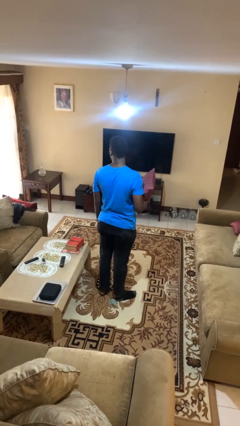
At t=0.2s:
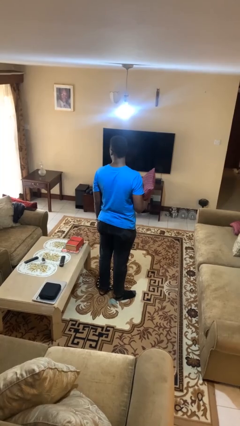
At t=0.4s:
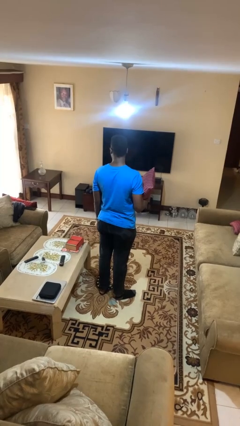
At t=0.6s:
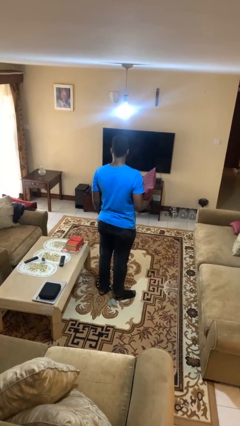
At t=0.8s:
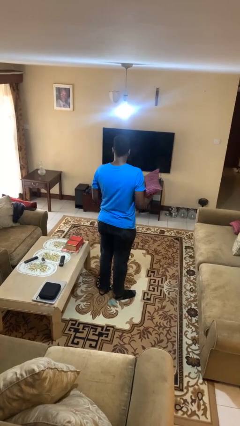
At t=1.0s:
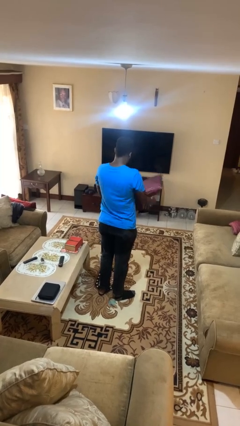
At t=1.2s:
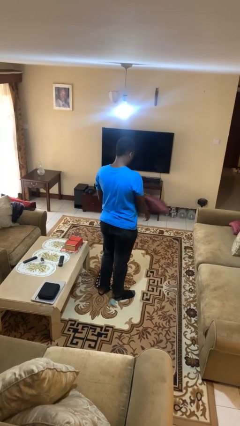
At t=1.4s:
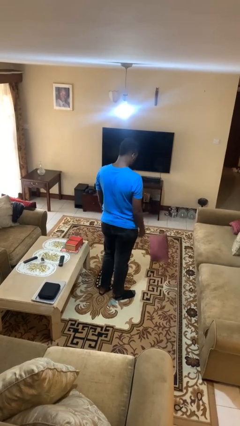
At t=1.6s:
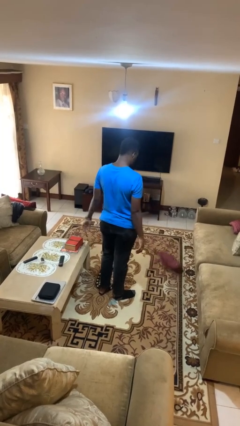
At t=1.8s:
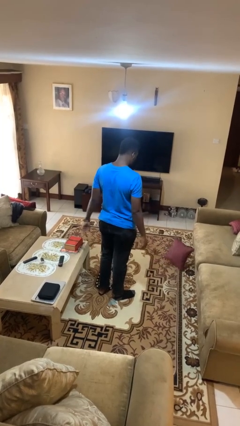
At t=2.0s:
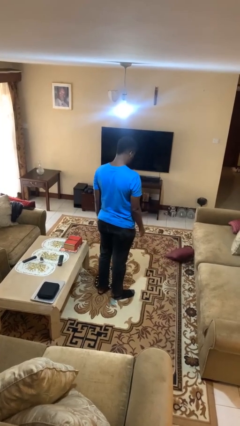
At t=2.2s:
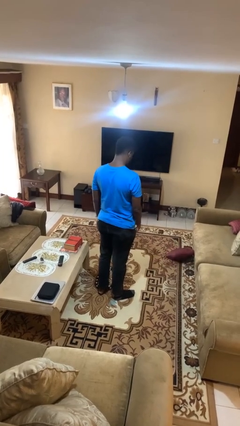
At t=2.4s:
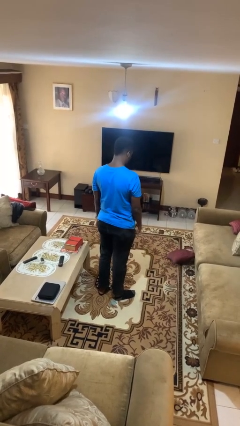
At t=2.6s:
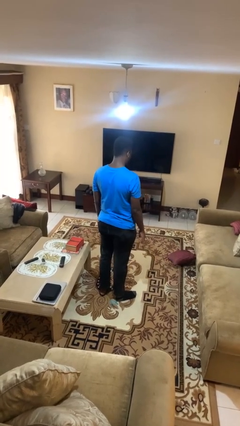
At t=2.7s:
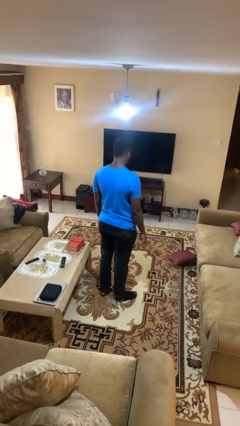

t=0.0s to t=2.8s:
person drops object

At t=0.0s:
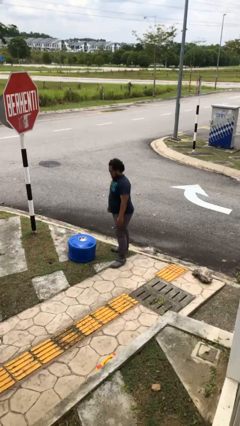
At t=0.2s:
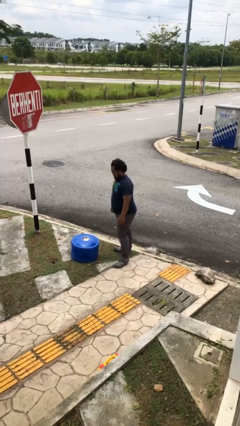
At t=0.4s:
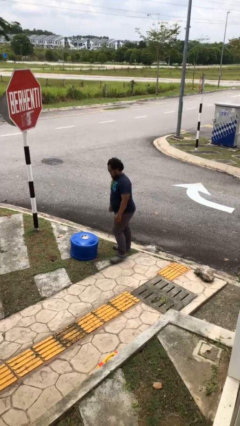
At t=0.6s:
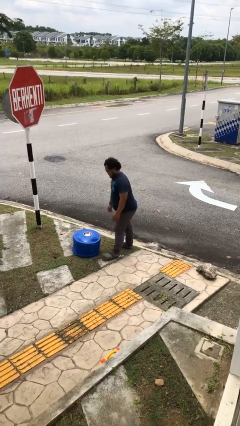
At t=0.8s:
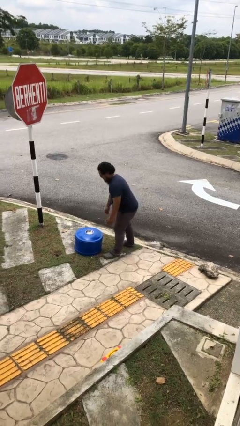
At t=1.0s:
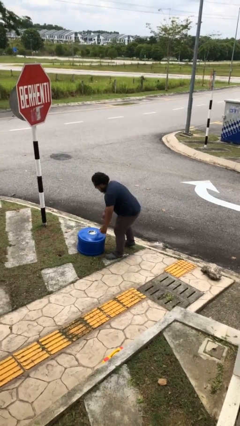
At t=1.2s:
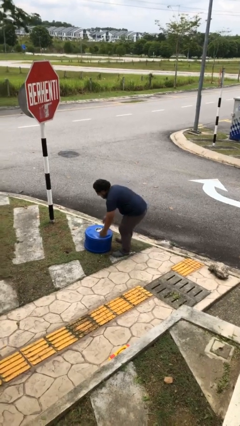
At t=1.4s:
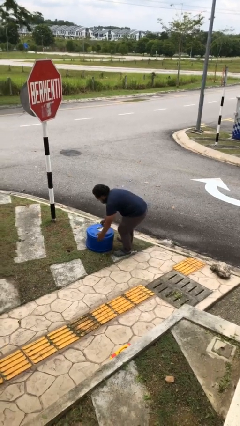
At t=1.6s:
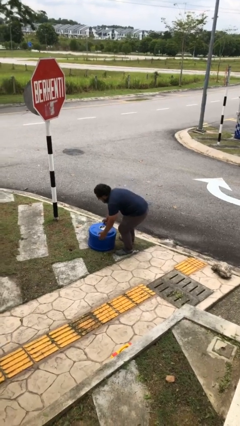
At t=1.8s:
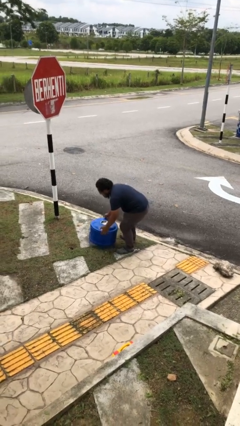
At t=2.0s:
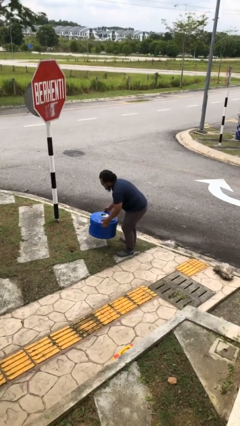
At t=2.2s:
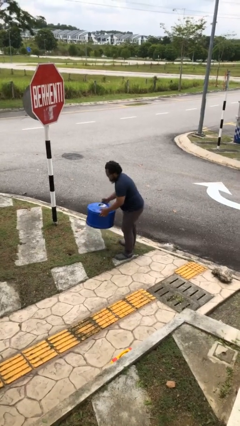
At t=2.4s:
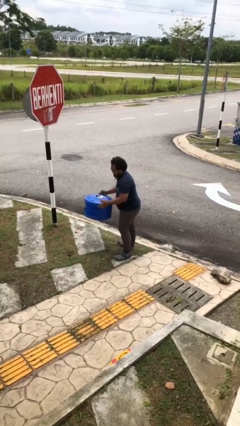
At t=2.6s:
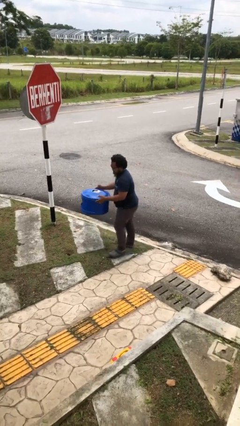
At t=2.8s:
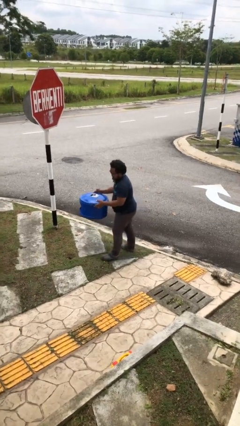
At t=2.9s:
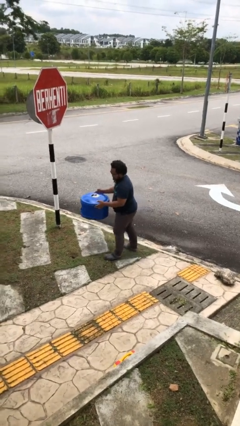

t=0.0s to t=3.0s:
person picks up object from floor

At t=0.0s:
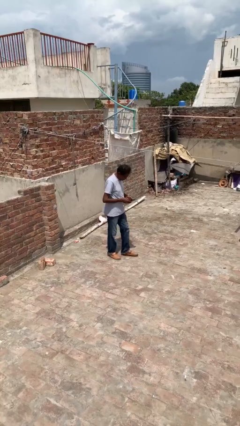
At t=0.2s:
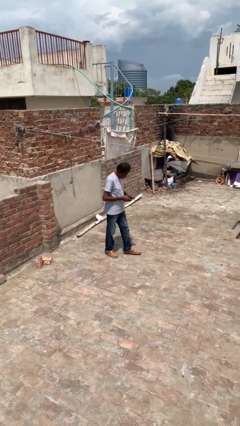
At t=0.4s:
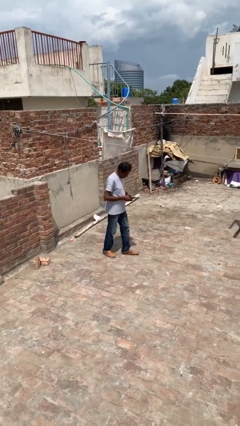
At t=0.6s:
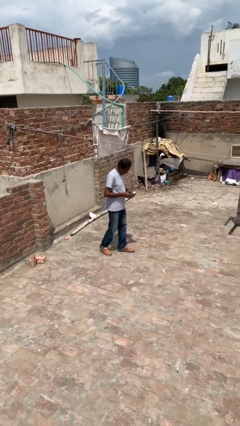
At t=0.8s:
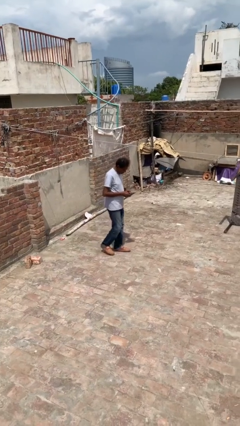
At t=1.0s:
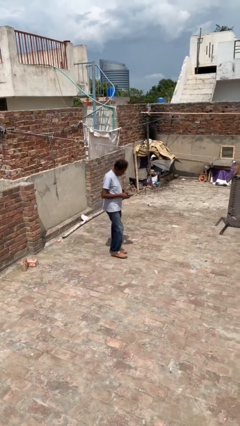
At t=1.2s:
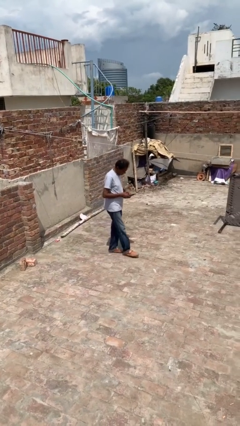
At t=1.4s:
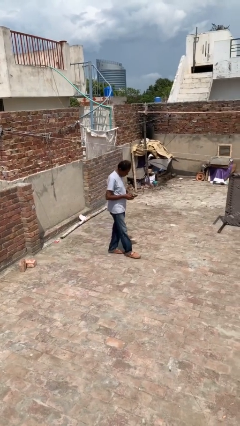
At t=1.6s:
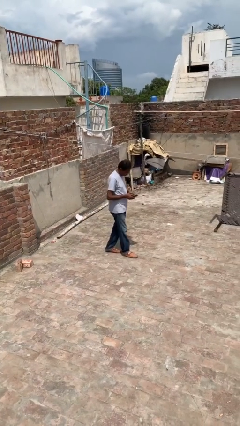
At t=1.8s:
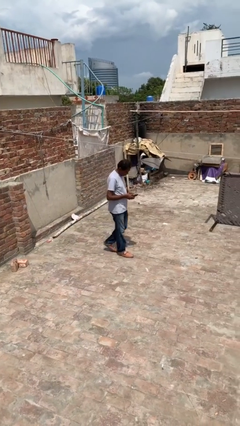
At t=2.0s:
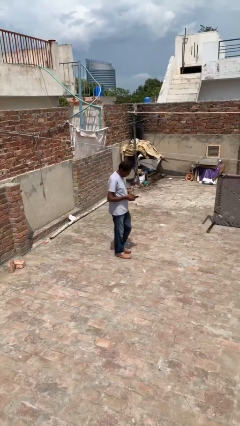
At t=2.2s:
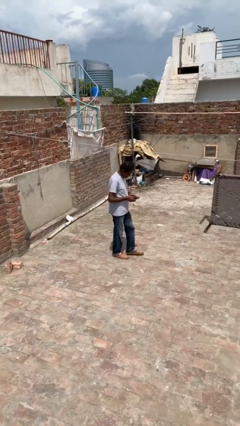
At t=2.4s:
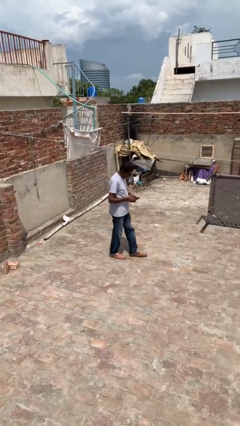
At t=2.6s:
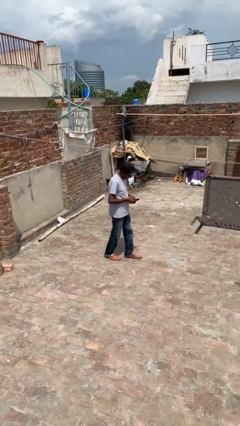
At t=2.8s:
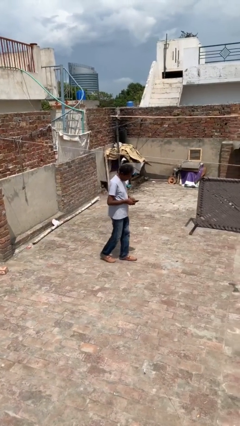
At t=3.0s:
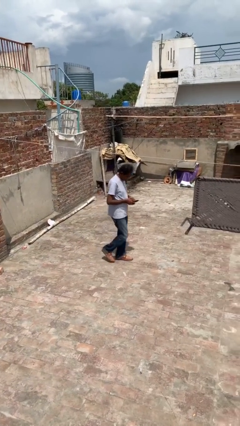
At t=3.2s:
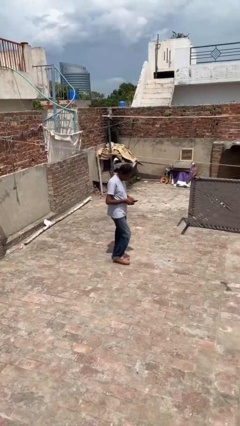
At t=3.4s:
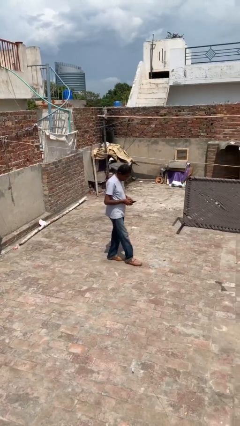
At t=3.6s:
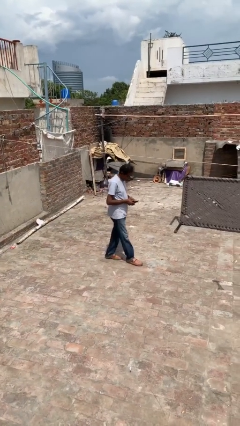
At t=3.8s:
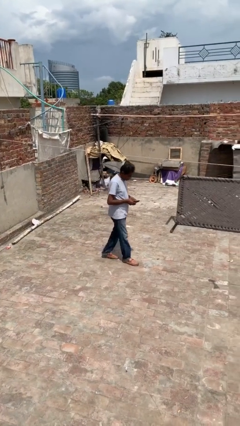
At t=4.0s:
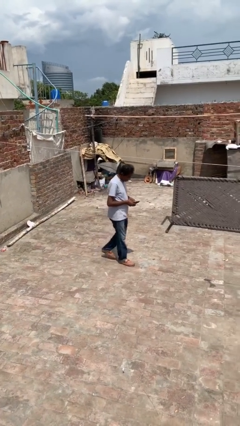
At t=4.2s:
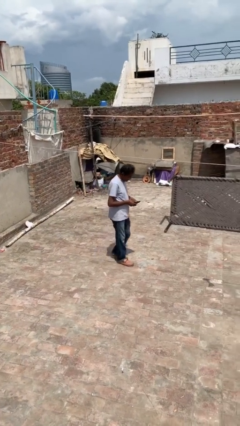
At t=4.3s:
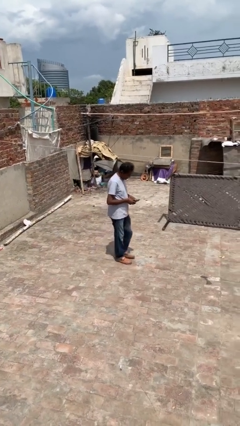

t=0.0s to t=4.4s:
person texts on phone

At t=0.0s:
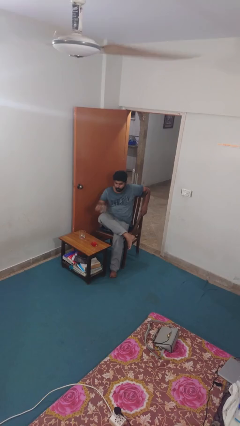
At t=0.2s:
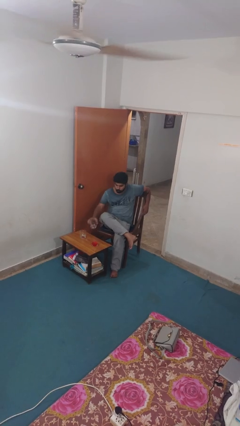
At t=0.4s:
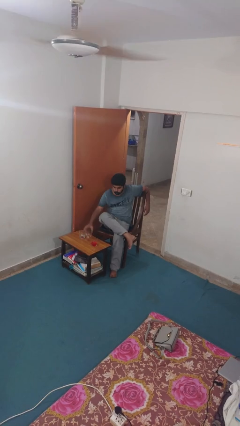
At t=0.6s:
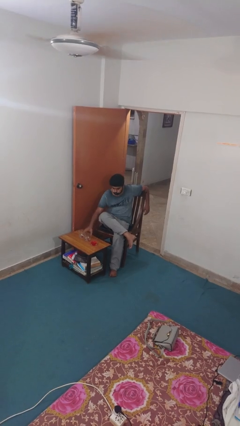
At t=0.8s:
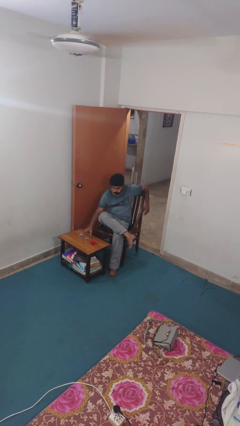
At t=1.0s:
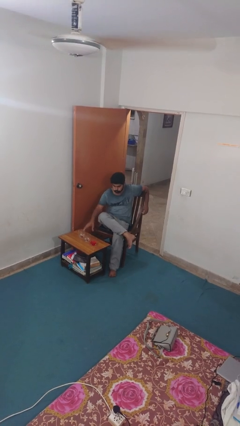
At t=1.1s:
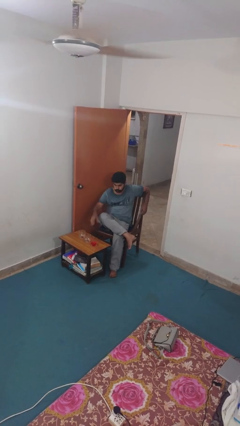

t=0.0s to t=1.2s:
person puts down object on table

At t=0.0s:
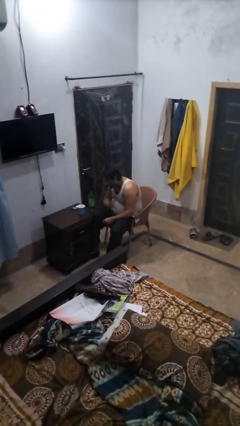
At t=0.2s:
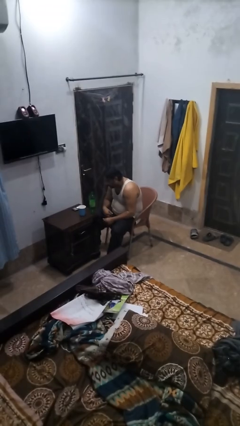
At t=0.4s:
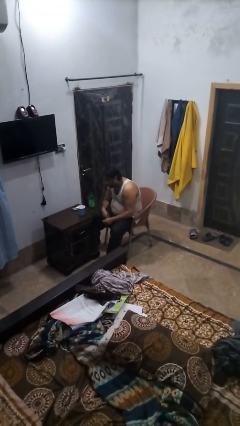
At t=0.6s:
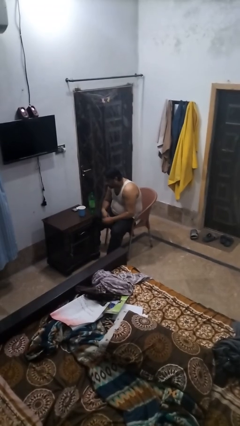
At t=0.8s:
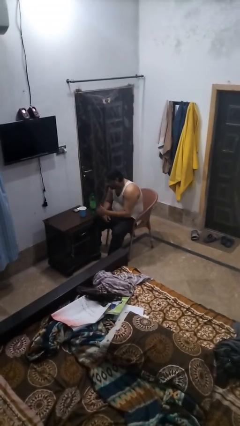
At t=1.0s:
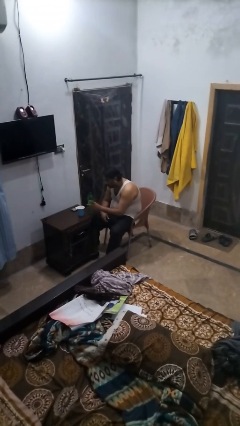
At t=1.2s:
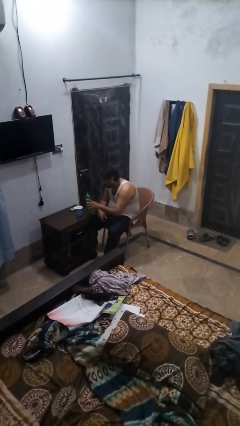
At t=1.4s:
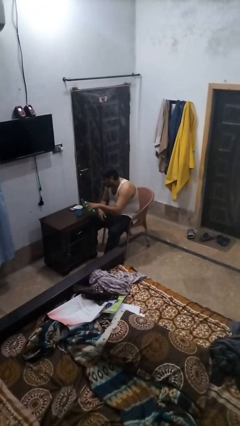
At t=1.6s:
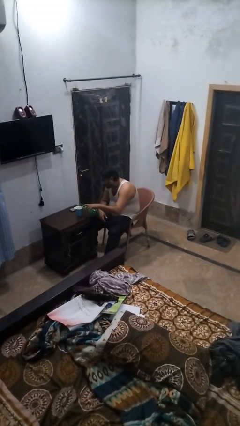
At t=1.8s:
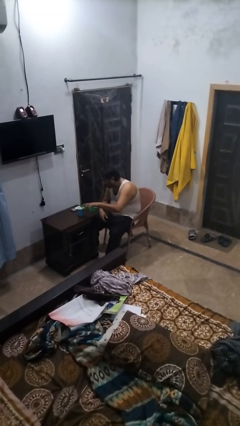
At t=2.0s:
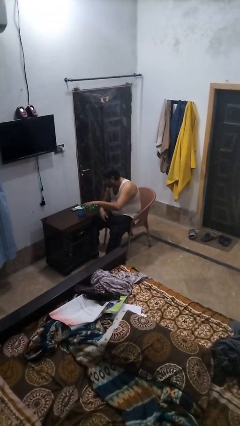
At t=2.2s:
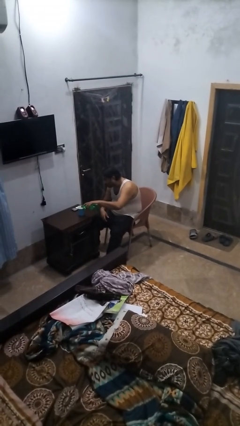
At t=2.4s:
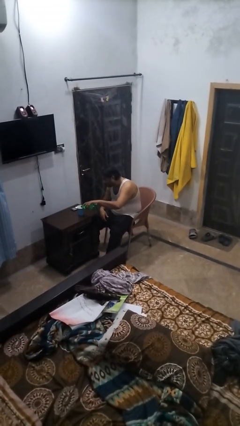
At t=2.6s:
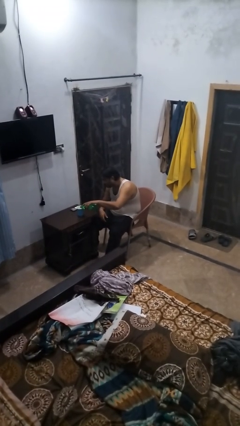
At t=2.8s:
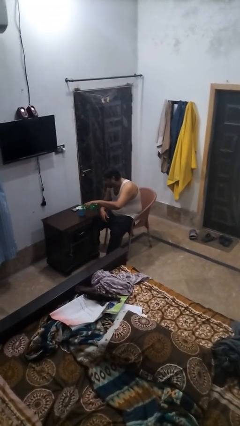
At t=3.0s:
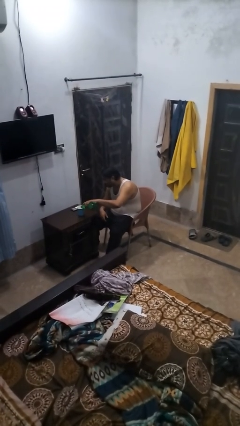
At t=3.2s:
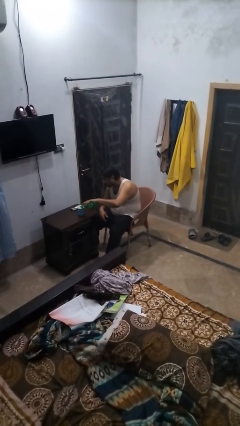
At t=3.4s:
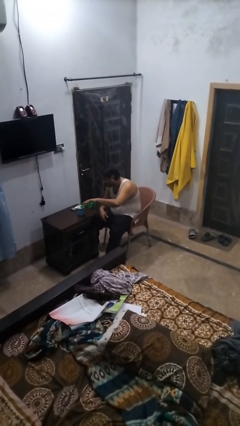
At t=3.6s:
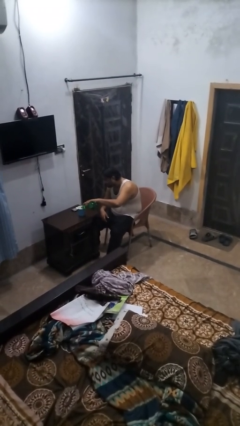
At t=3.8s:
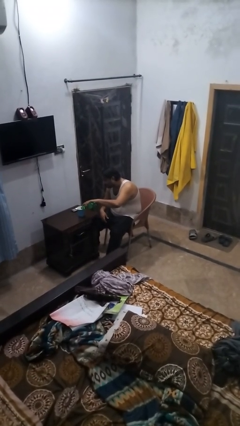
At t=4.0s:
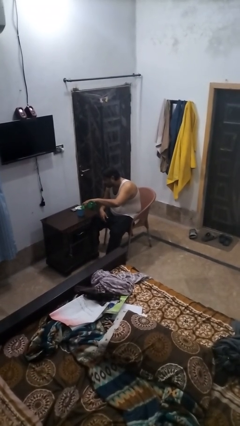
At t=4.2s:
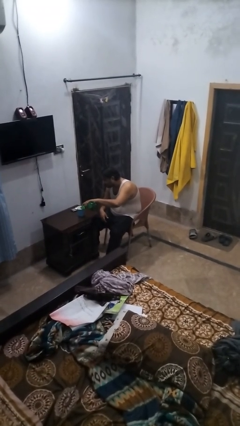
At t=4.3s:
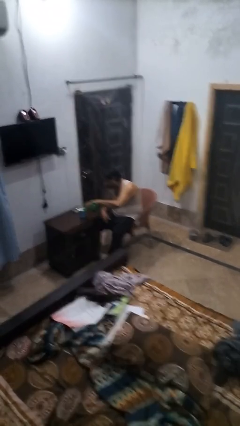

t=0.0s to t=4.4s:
person pours liquid into cup

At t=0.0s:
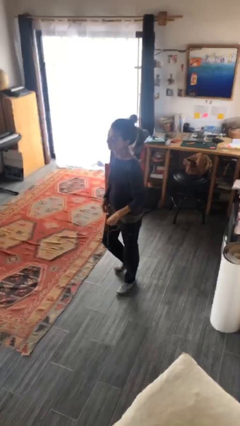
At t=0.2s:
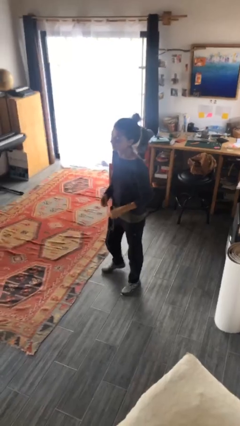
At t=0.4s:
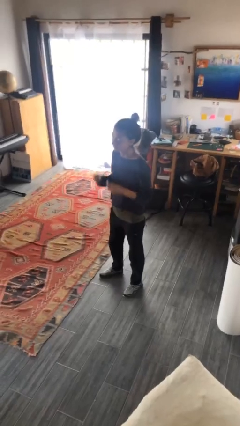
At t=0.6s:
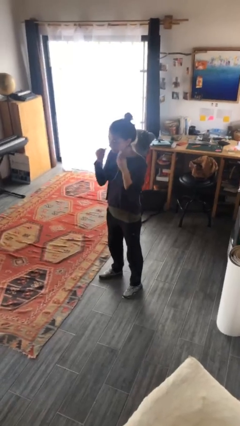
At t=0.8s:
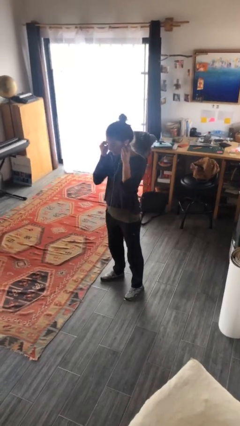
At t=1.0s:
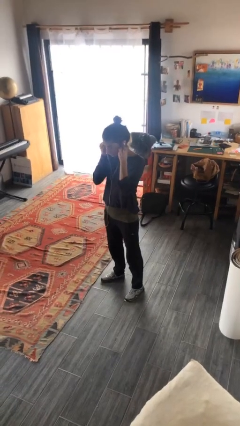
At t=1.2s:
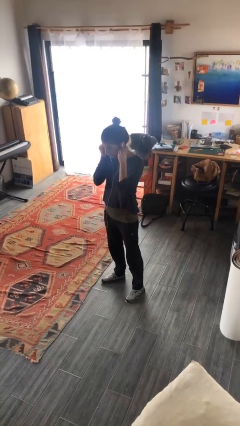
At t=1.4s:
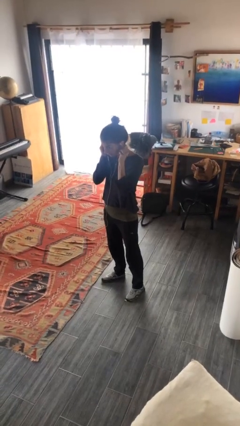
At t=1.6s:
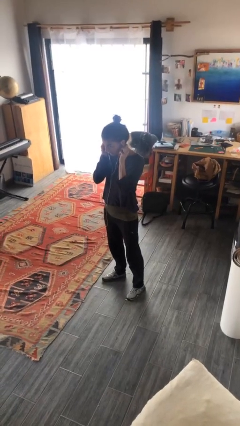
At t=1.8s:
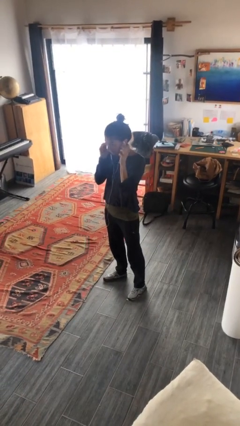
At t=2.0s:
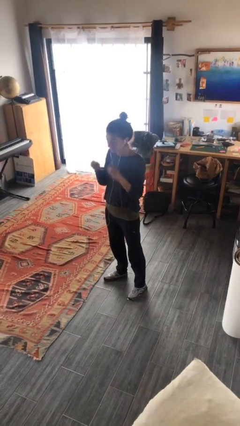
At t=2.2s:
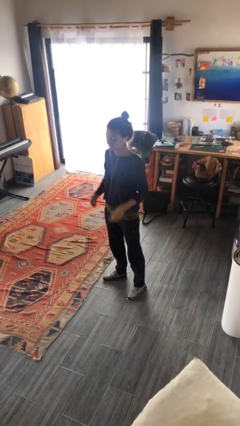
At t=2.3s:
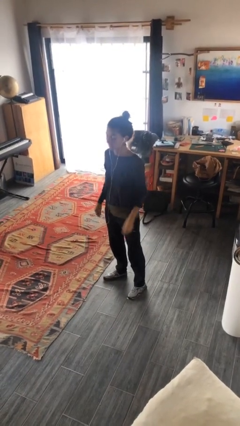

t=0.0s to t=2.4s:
person puts on headphones
